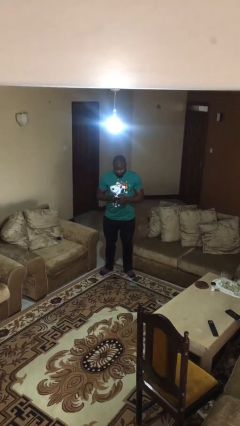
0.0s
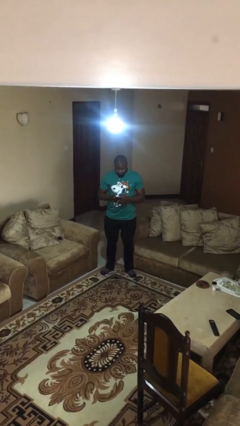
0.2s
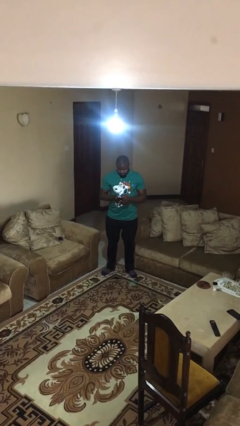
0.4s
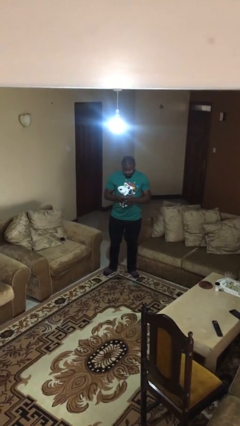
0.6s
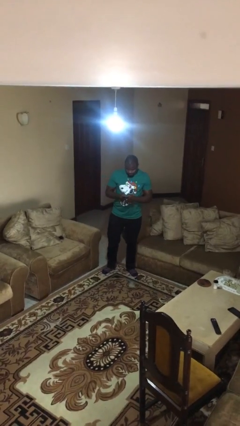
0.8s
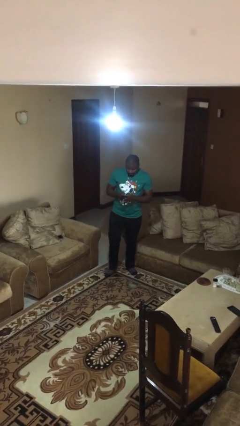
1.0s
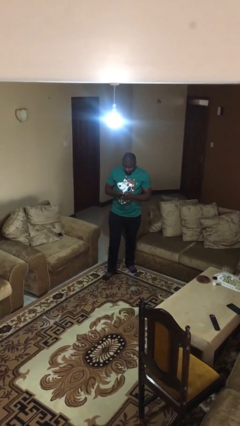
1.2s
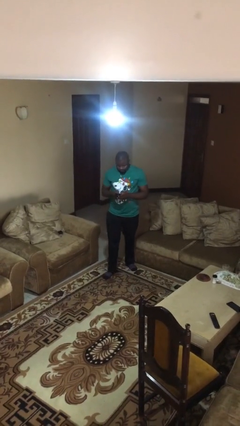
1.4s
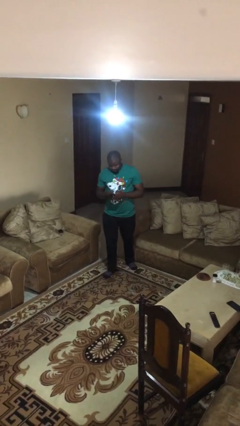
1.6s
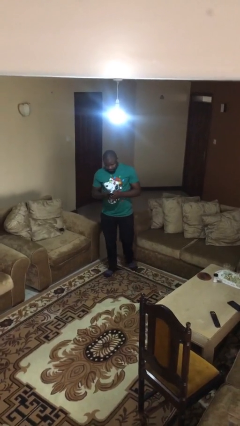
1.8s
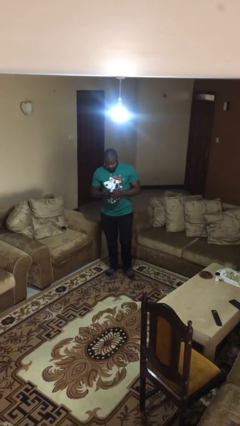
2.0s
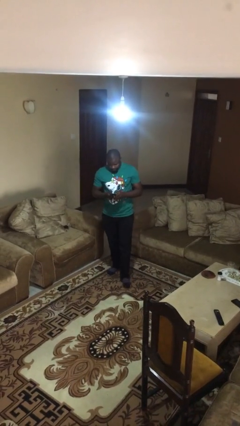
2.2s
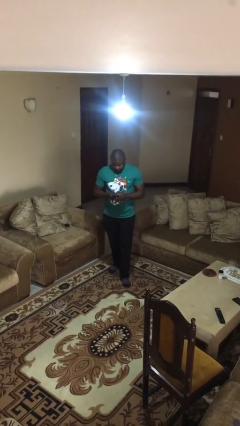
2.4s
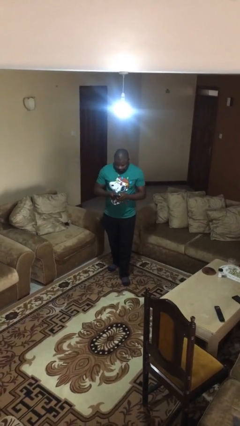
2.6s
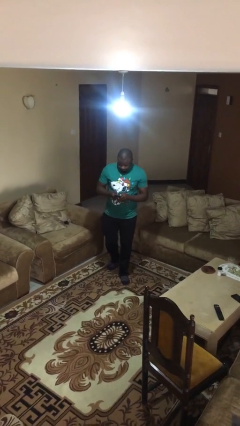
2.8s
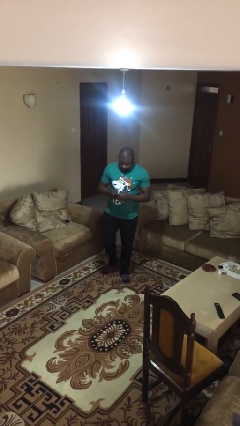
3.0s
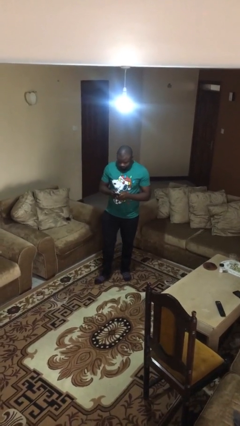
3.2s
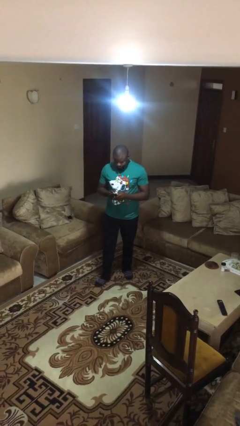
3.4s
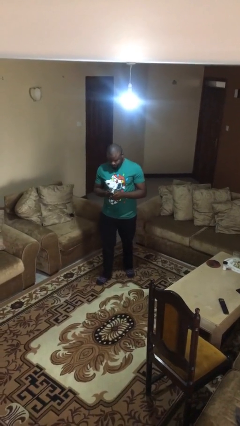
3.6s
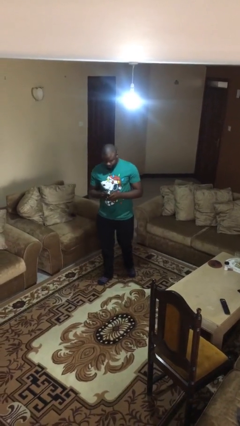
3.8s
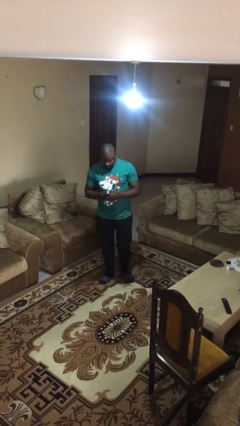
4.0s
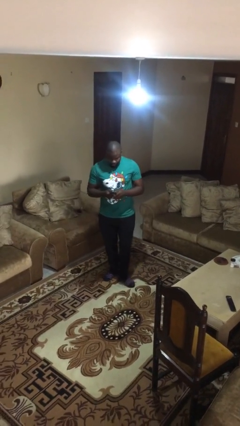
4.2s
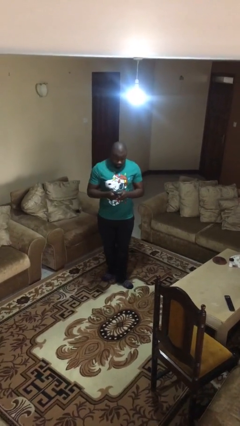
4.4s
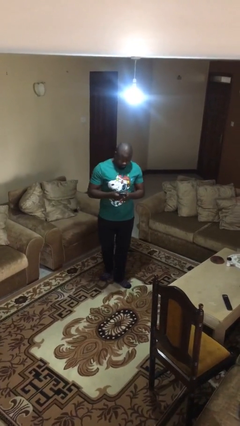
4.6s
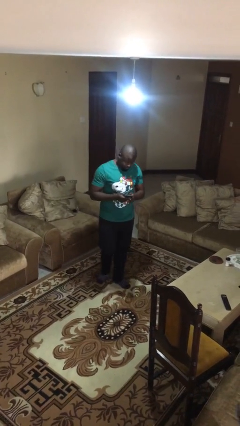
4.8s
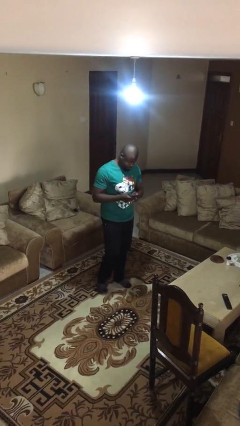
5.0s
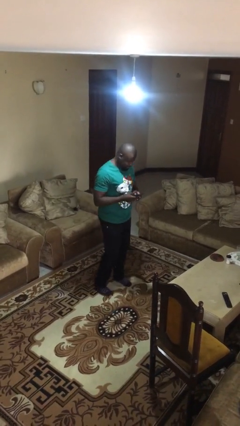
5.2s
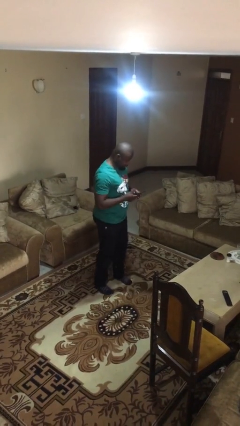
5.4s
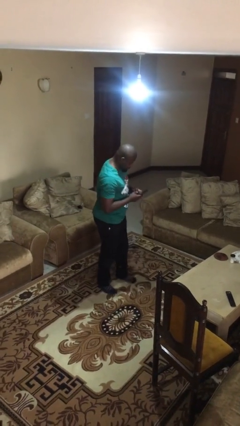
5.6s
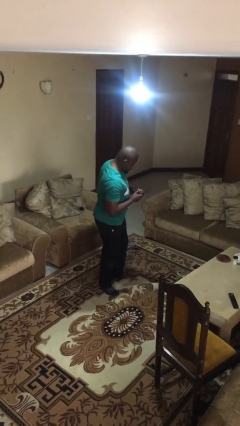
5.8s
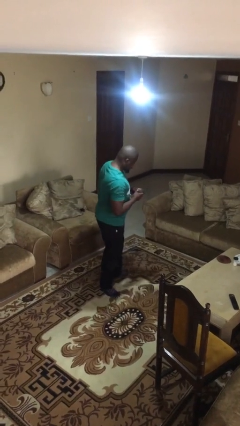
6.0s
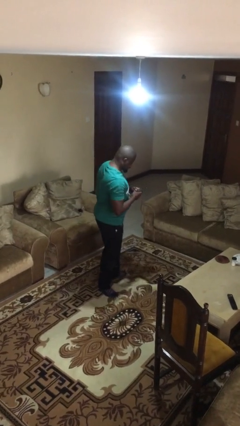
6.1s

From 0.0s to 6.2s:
person texts on phone

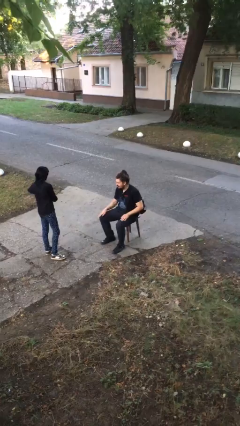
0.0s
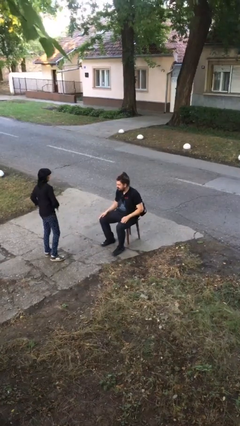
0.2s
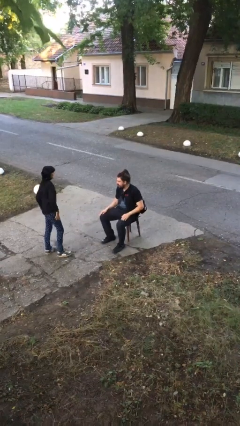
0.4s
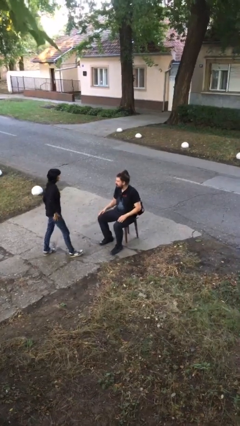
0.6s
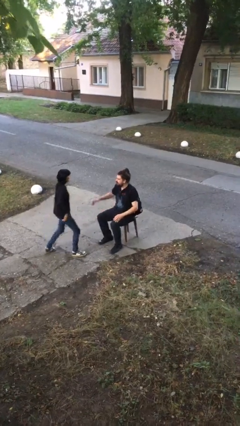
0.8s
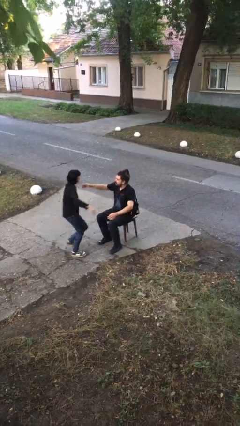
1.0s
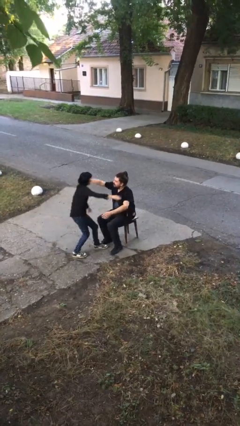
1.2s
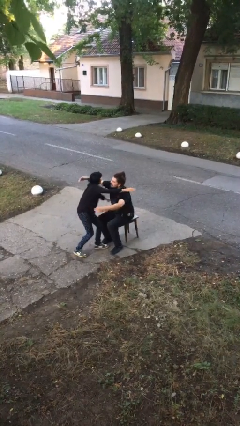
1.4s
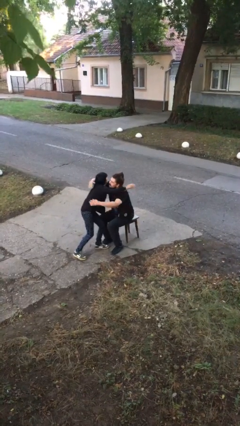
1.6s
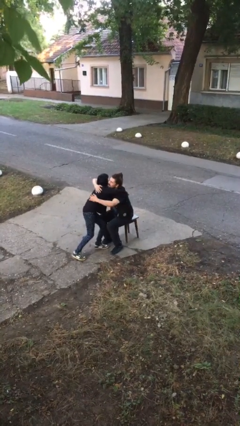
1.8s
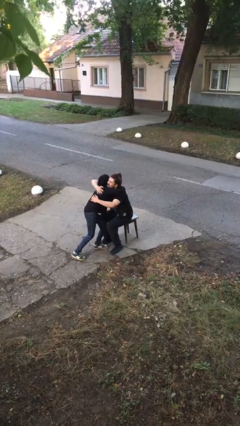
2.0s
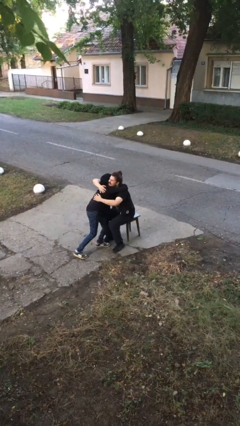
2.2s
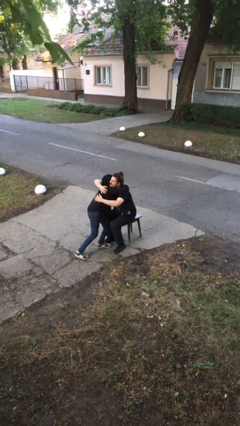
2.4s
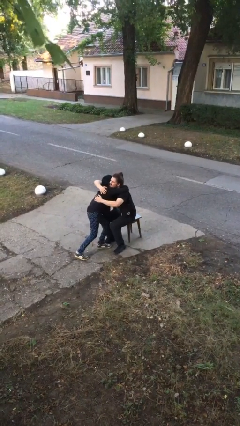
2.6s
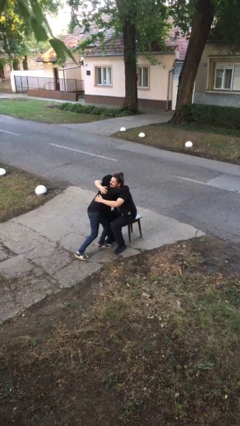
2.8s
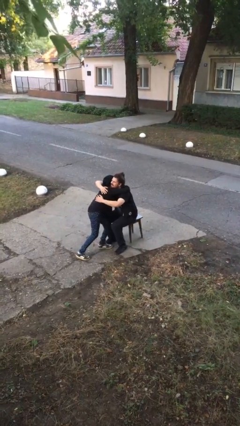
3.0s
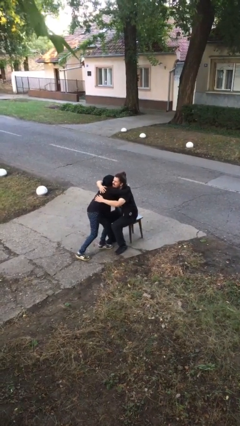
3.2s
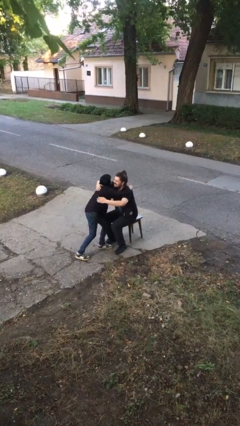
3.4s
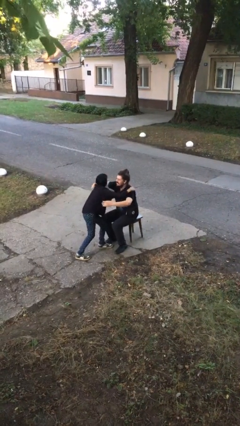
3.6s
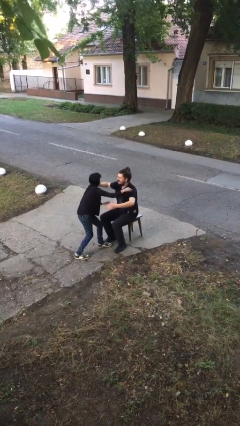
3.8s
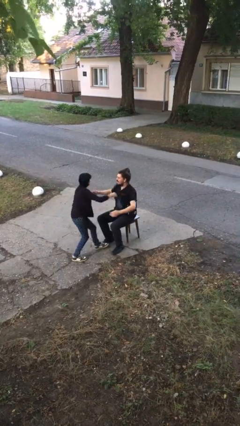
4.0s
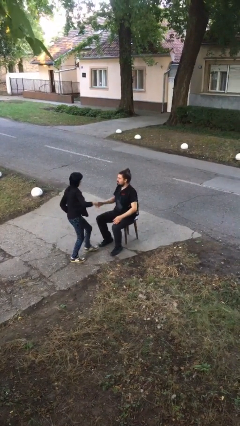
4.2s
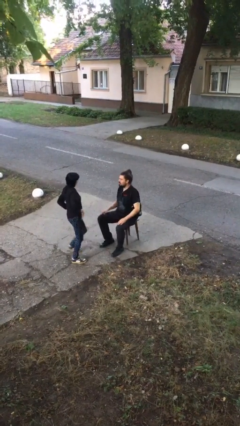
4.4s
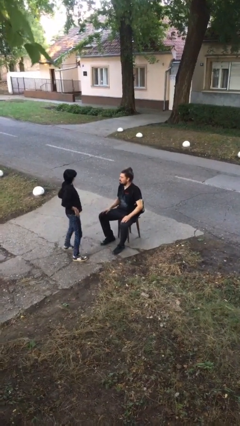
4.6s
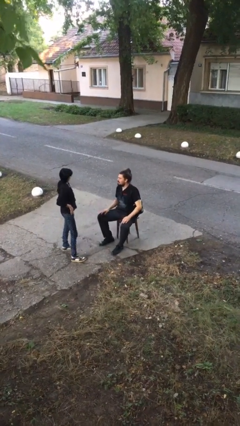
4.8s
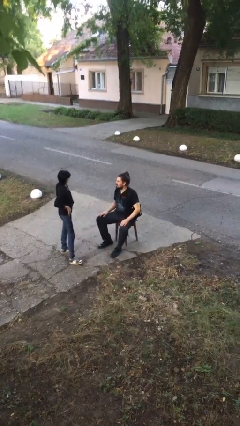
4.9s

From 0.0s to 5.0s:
person embraces person

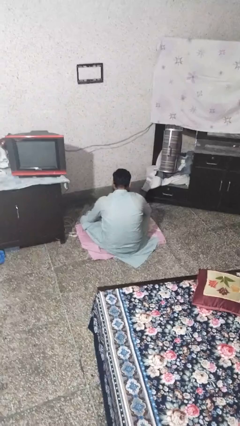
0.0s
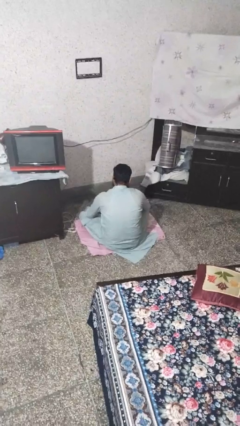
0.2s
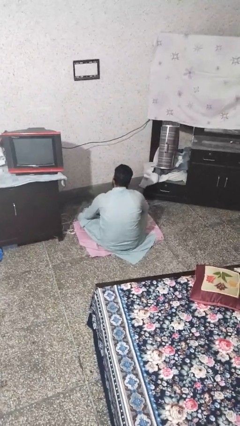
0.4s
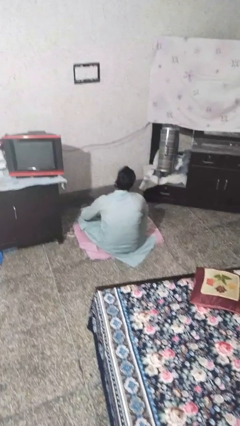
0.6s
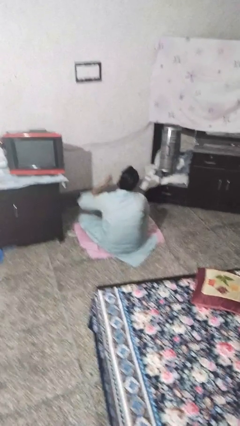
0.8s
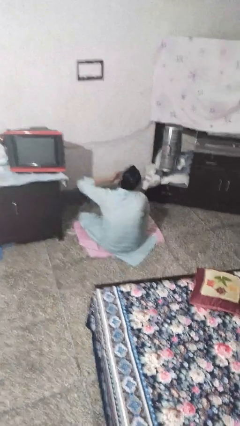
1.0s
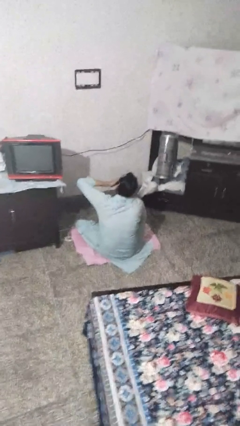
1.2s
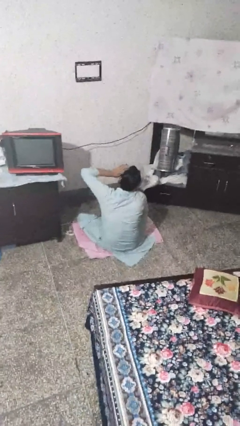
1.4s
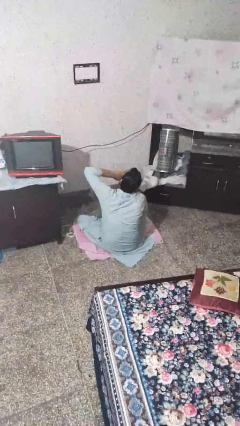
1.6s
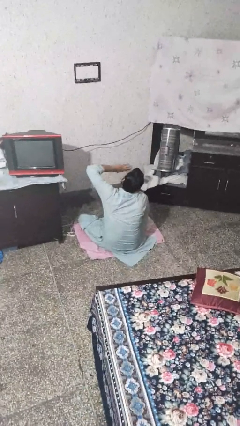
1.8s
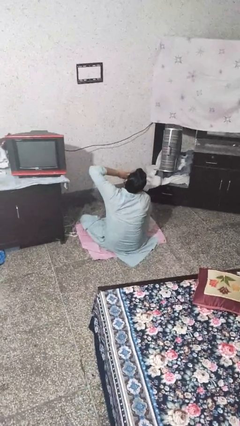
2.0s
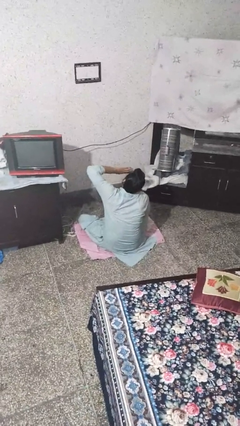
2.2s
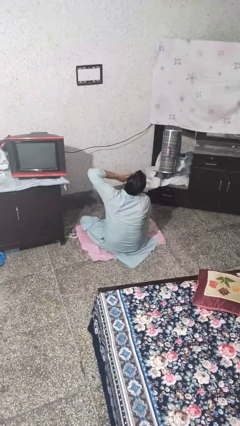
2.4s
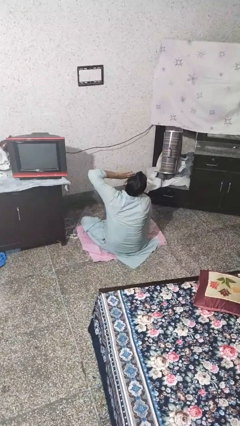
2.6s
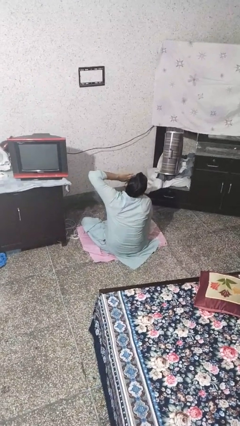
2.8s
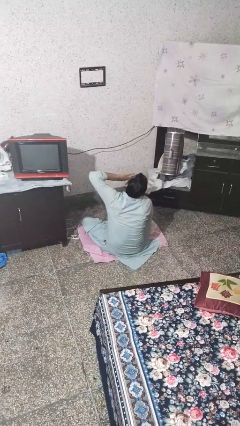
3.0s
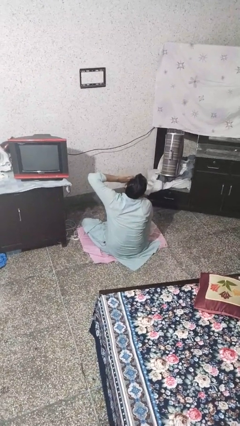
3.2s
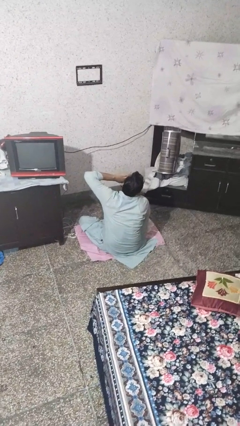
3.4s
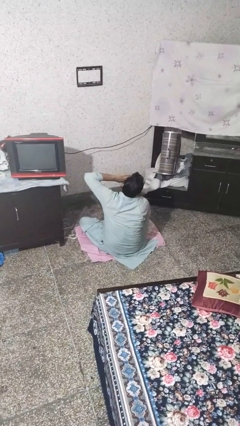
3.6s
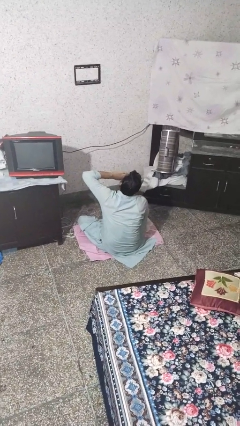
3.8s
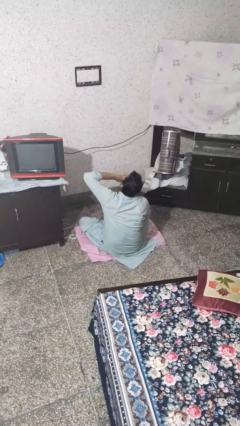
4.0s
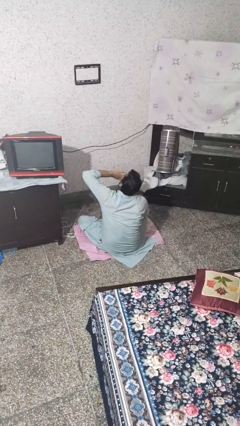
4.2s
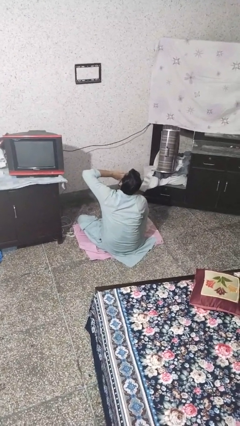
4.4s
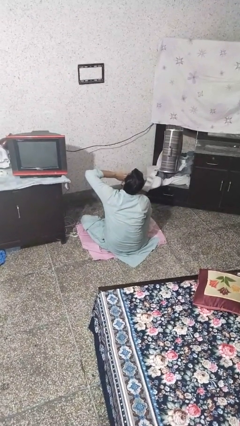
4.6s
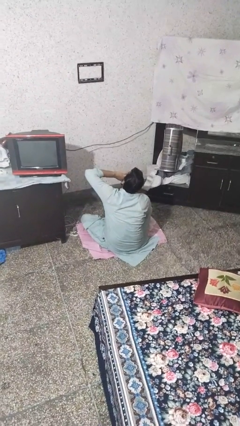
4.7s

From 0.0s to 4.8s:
person yawns

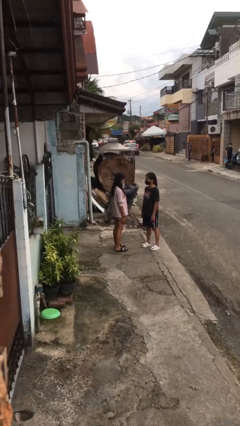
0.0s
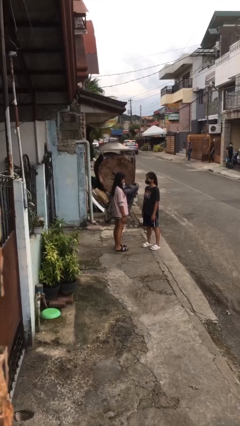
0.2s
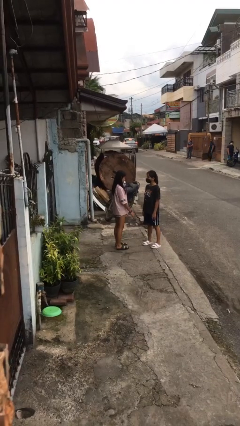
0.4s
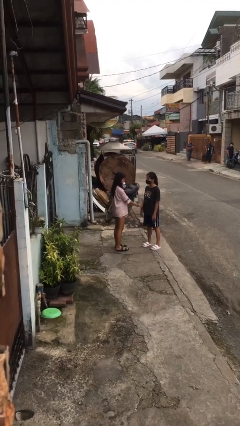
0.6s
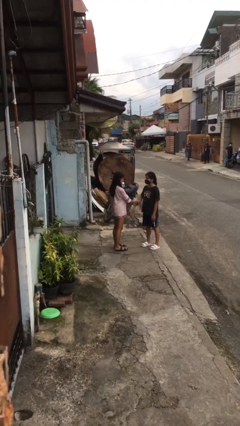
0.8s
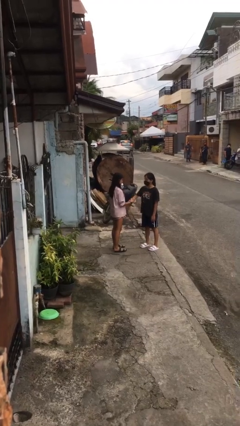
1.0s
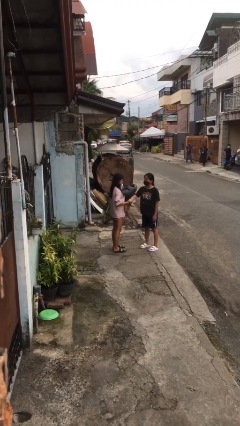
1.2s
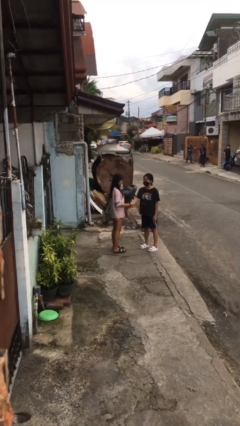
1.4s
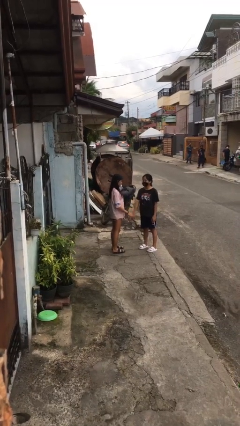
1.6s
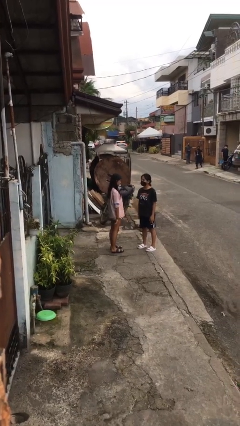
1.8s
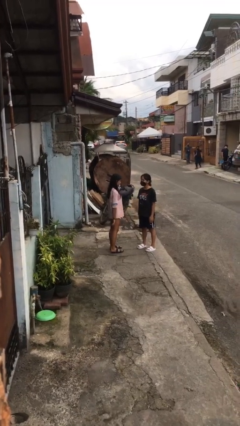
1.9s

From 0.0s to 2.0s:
person grabs person by forearm
